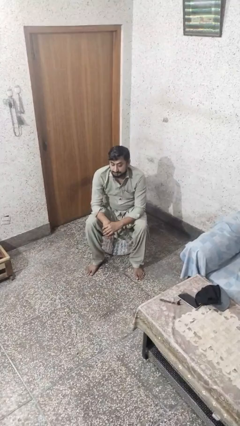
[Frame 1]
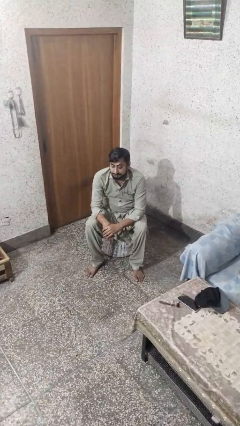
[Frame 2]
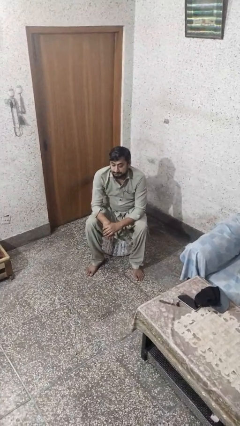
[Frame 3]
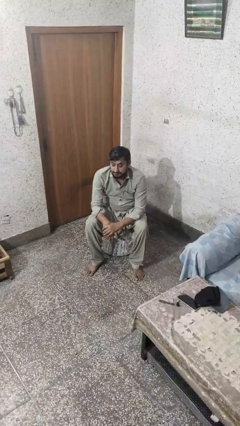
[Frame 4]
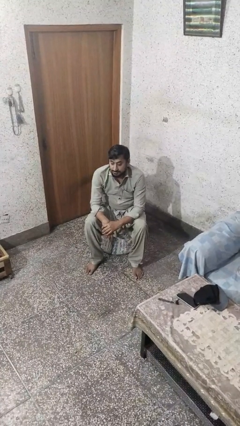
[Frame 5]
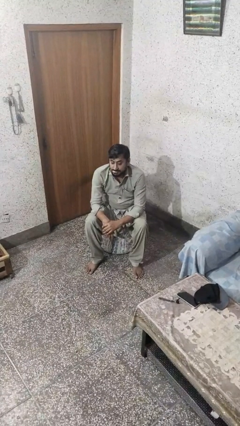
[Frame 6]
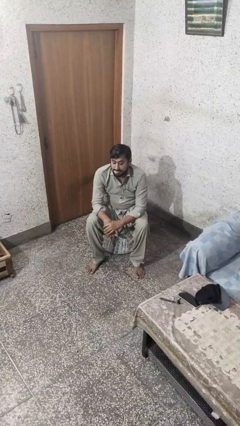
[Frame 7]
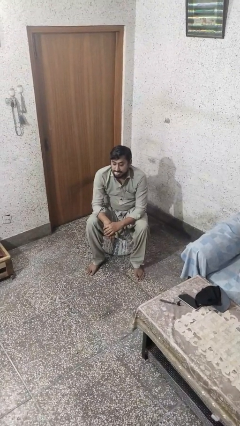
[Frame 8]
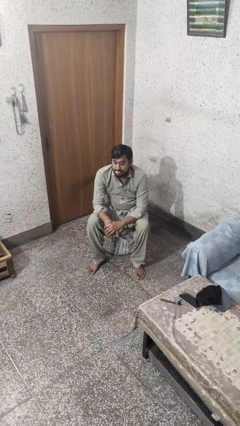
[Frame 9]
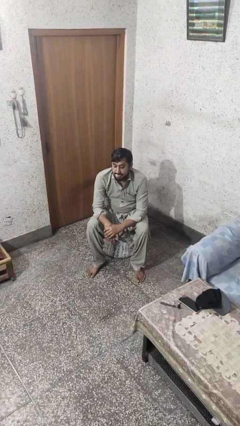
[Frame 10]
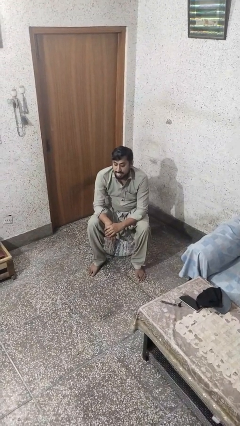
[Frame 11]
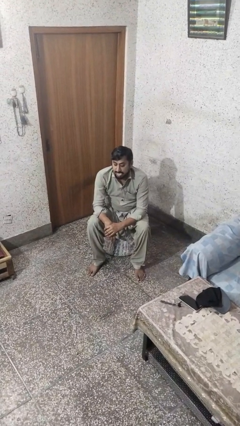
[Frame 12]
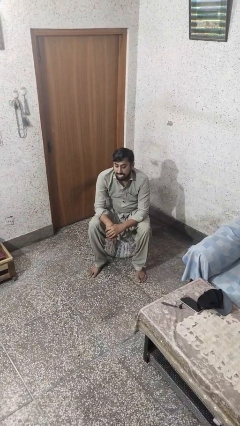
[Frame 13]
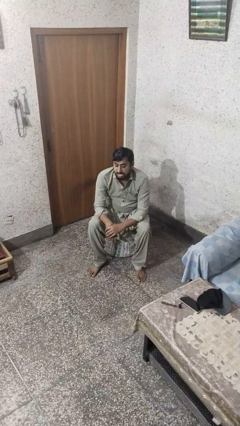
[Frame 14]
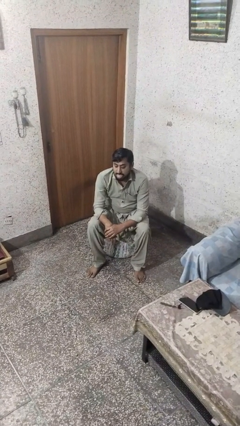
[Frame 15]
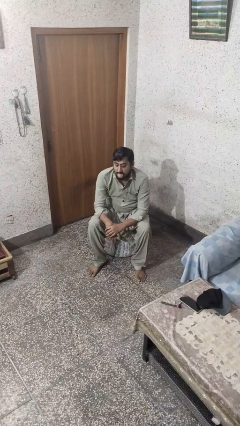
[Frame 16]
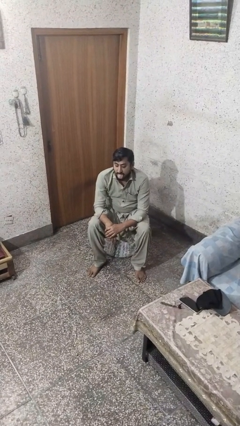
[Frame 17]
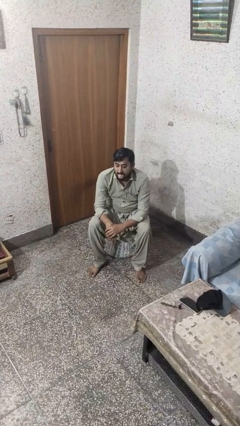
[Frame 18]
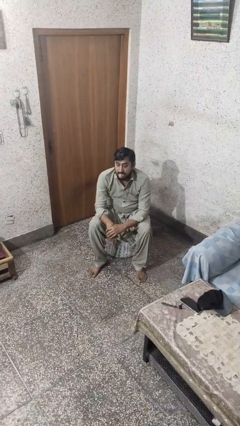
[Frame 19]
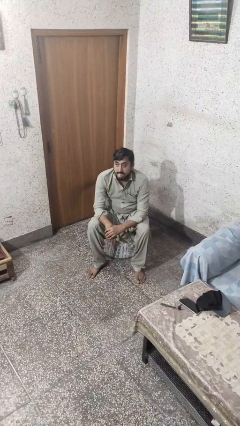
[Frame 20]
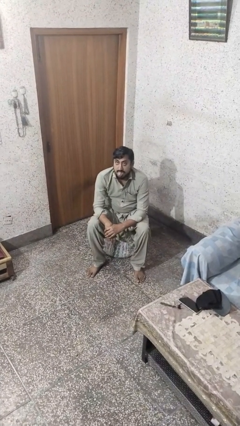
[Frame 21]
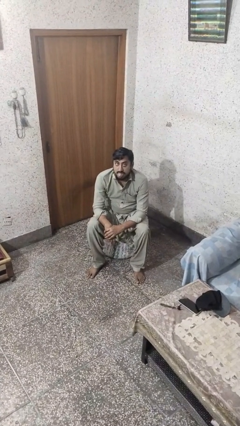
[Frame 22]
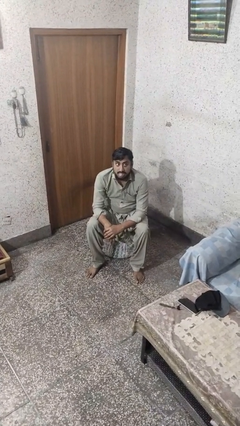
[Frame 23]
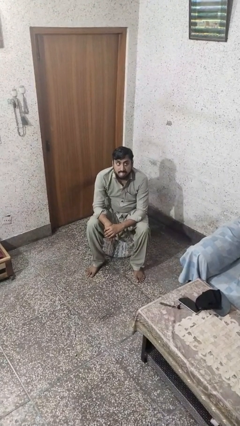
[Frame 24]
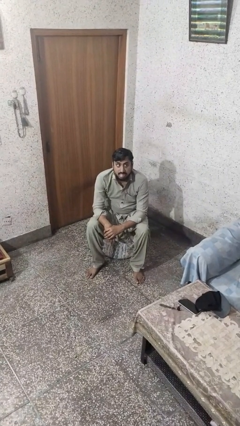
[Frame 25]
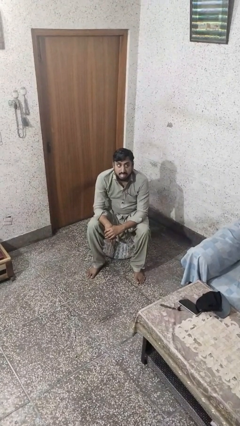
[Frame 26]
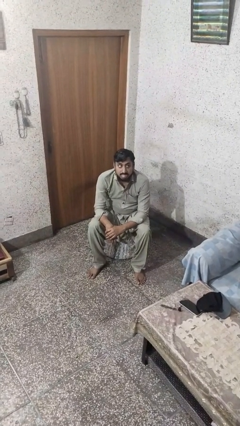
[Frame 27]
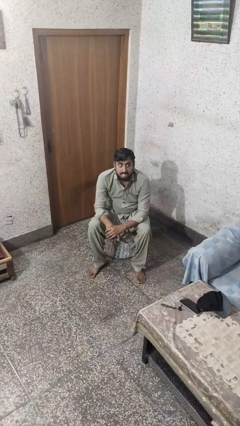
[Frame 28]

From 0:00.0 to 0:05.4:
person sticks out tongue

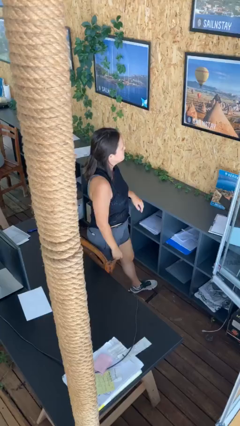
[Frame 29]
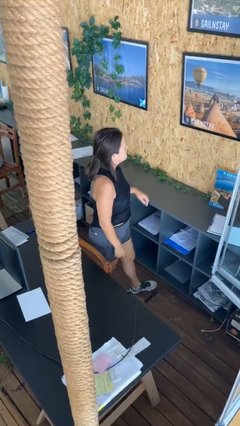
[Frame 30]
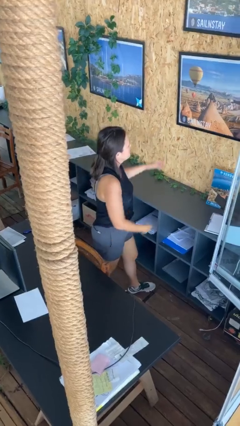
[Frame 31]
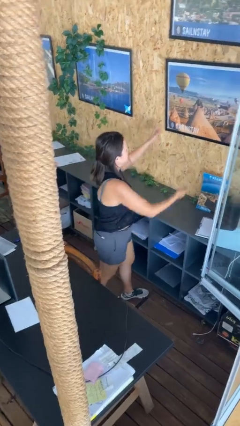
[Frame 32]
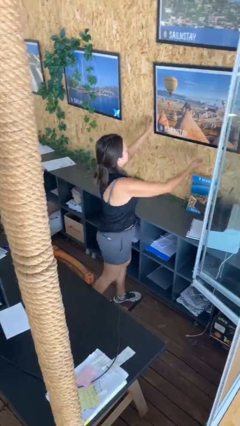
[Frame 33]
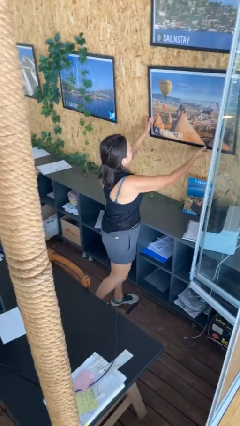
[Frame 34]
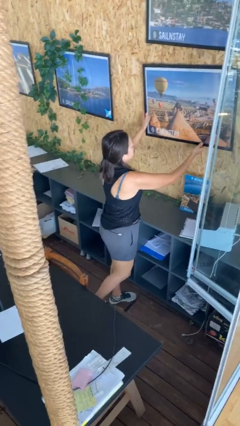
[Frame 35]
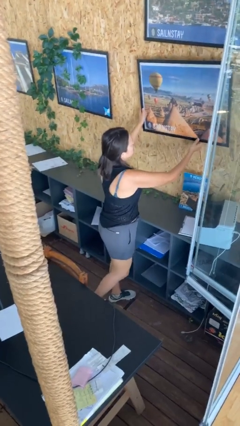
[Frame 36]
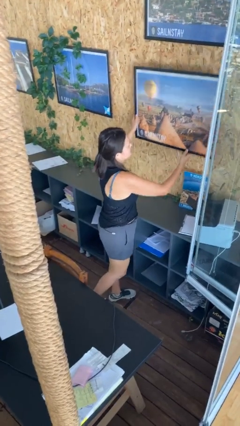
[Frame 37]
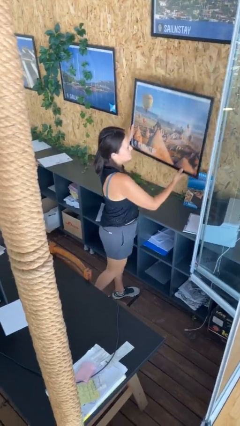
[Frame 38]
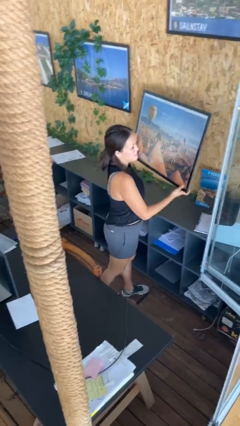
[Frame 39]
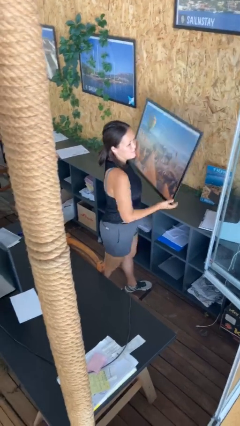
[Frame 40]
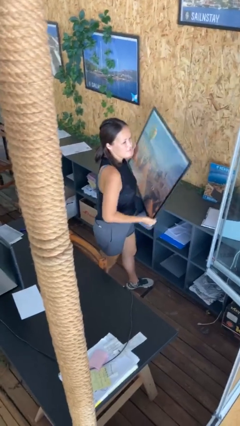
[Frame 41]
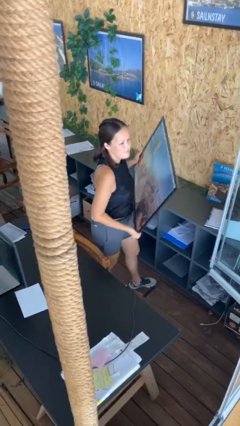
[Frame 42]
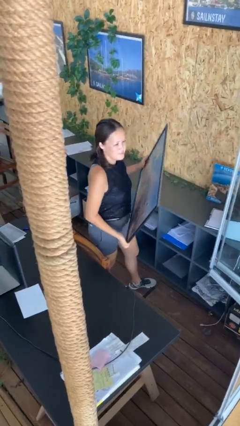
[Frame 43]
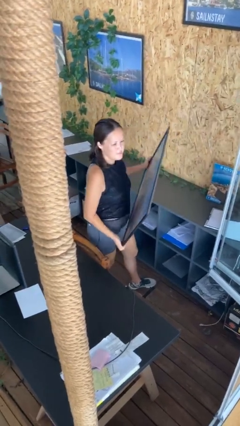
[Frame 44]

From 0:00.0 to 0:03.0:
person takes down picture frame

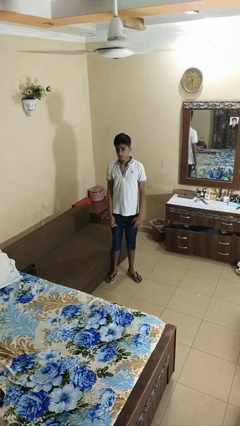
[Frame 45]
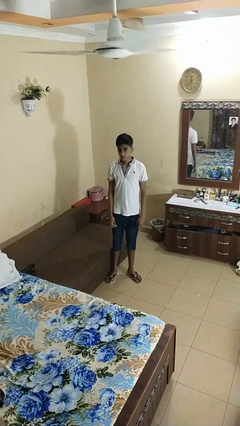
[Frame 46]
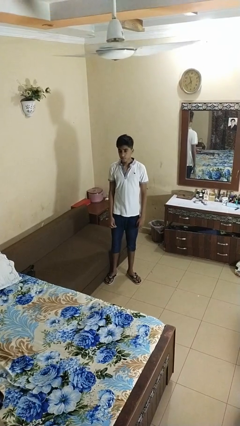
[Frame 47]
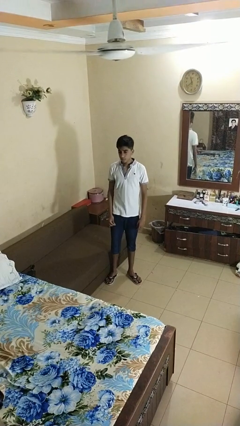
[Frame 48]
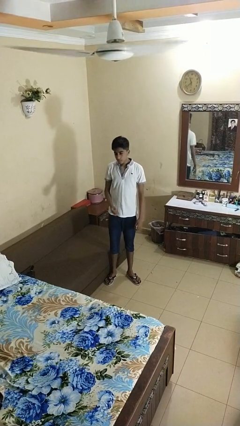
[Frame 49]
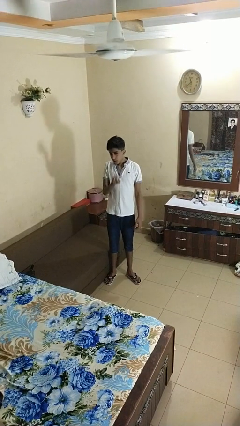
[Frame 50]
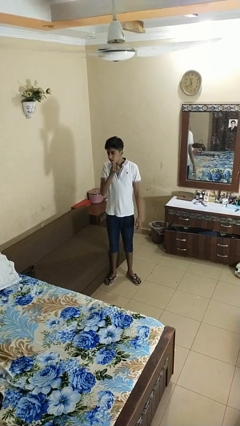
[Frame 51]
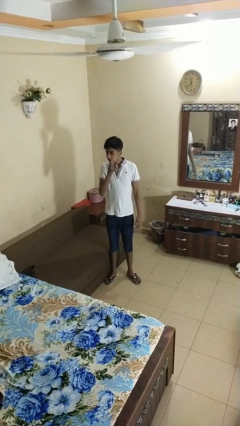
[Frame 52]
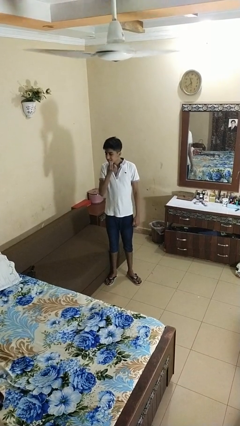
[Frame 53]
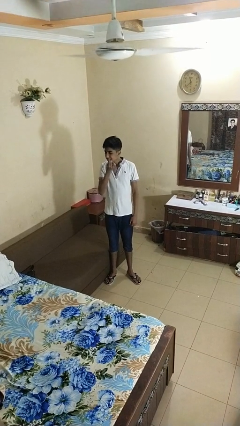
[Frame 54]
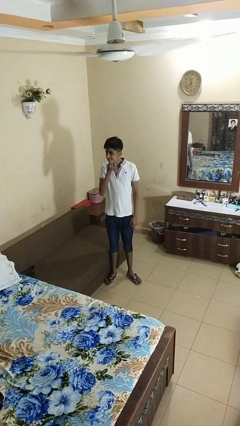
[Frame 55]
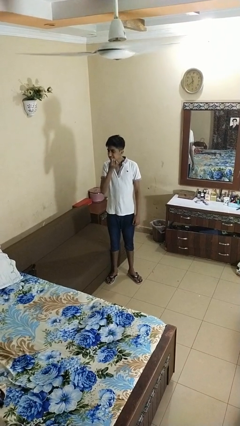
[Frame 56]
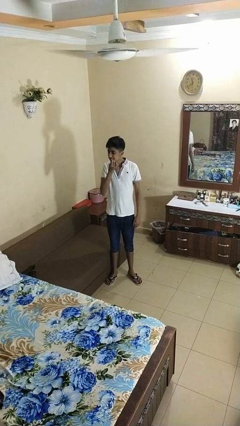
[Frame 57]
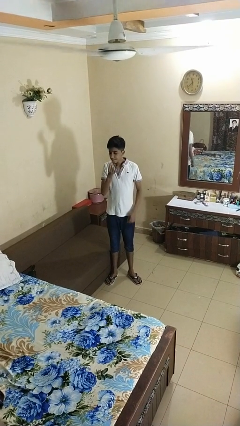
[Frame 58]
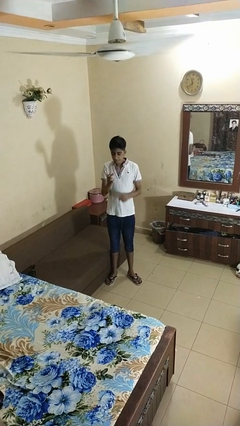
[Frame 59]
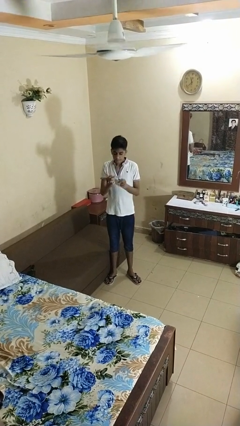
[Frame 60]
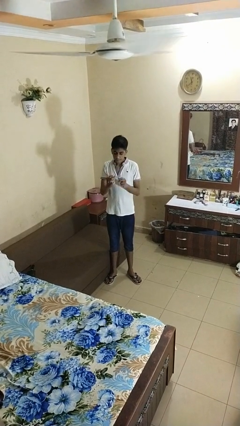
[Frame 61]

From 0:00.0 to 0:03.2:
person flosses

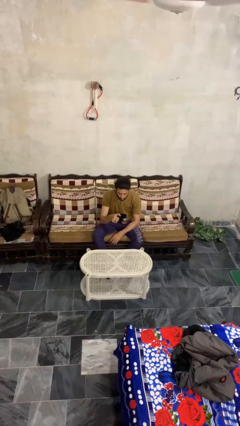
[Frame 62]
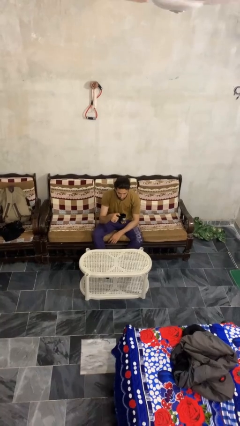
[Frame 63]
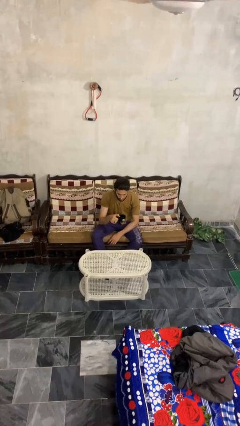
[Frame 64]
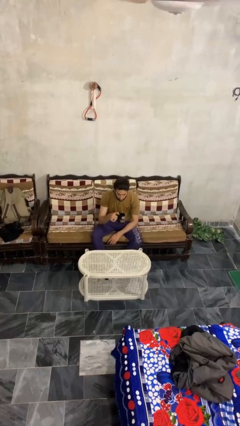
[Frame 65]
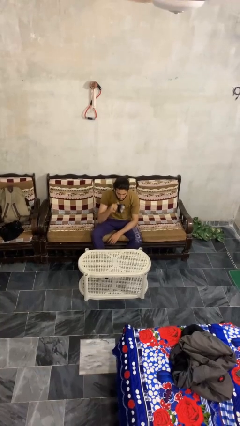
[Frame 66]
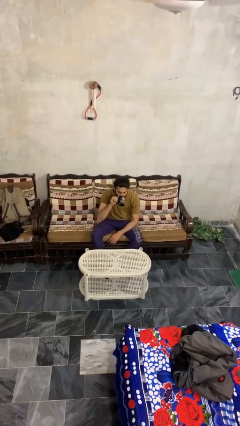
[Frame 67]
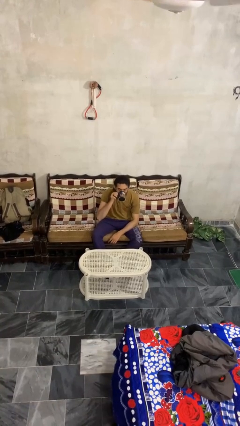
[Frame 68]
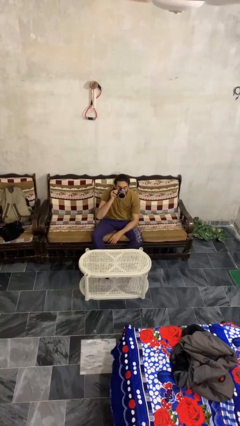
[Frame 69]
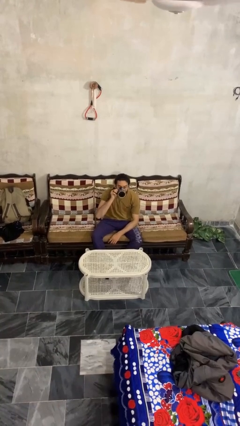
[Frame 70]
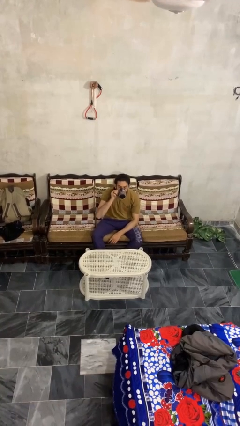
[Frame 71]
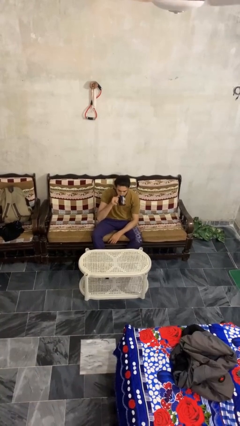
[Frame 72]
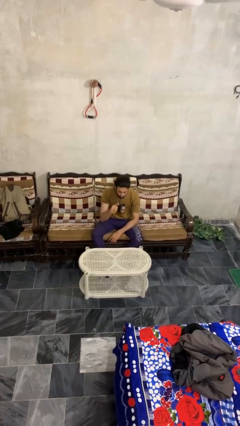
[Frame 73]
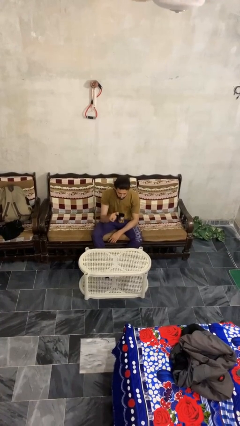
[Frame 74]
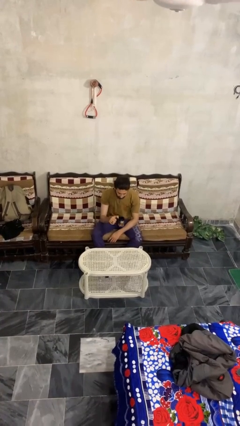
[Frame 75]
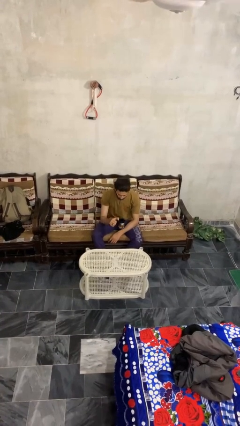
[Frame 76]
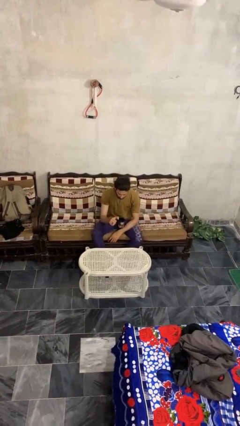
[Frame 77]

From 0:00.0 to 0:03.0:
person drinks from mug

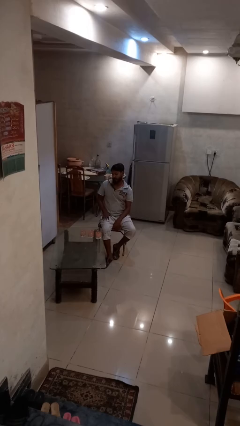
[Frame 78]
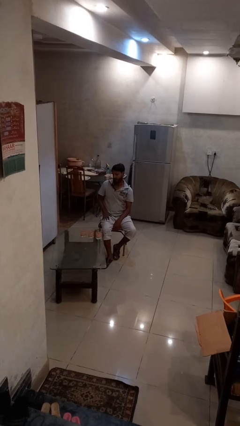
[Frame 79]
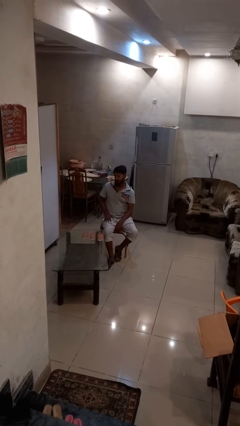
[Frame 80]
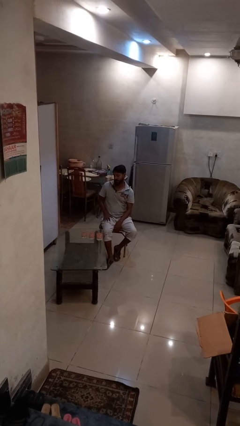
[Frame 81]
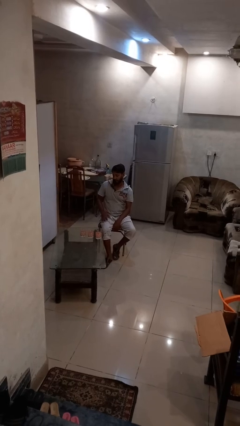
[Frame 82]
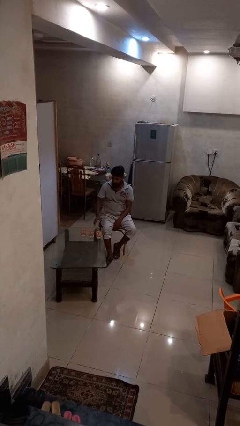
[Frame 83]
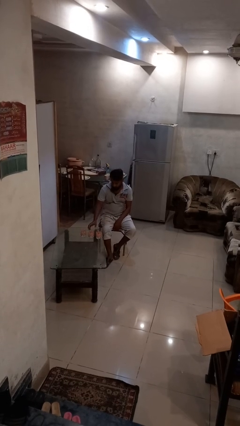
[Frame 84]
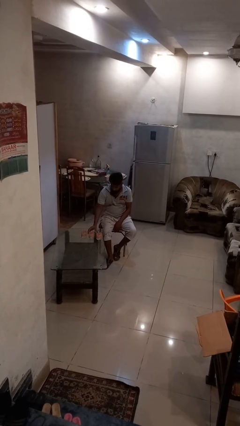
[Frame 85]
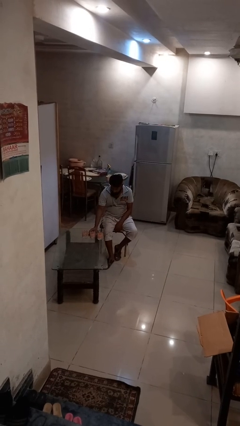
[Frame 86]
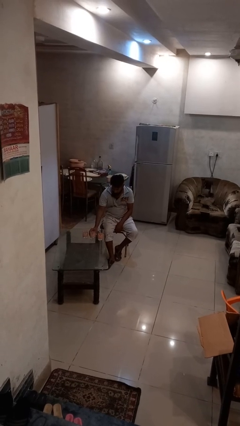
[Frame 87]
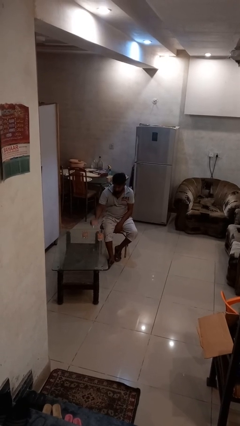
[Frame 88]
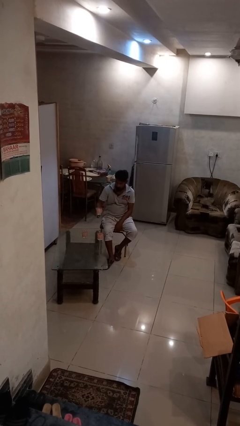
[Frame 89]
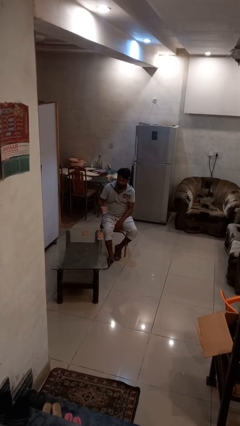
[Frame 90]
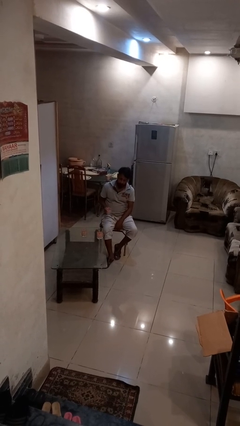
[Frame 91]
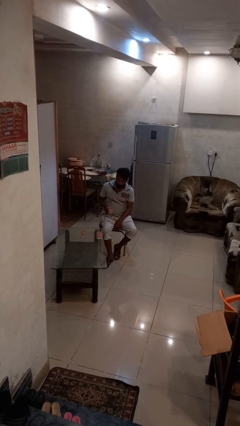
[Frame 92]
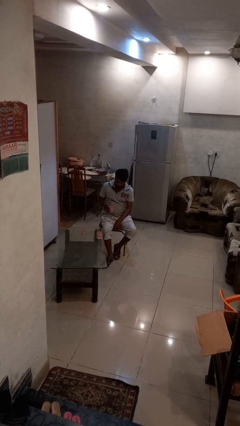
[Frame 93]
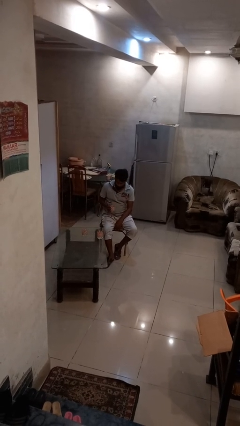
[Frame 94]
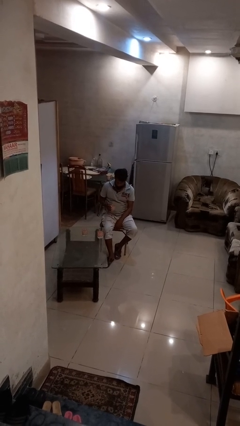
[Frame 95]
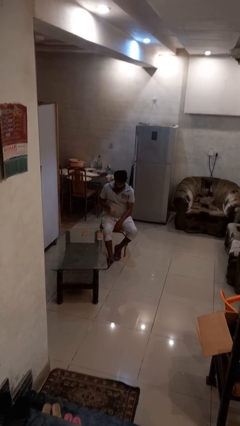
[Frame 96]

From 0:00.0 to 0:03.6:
person picks up object from table
